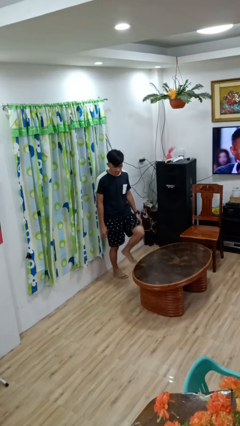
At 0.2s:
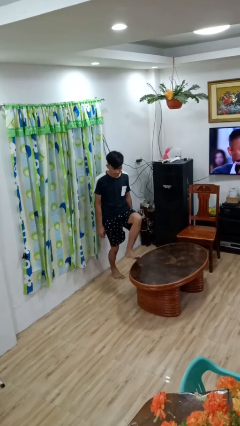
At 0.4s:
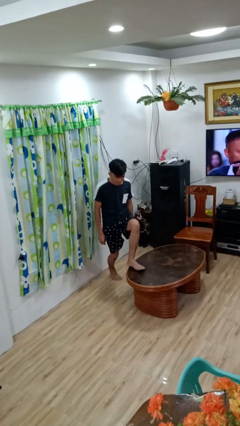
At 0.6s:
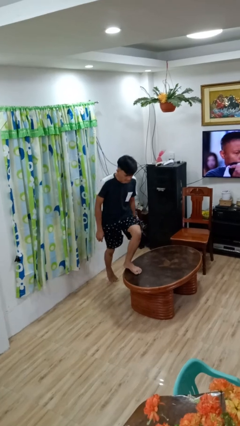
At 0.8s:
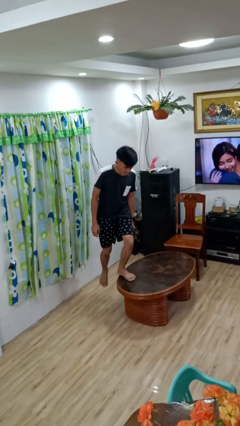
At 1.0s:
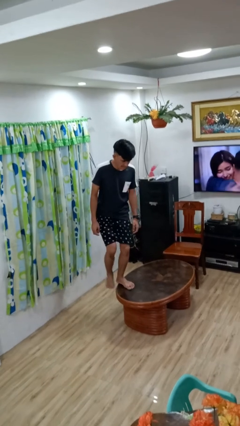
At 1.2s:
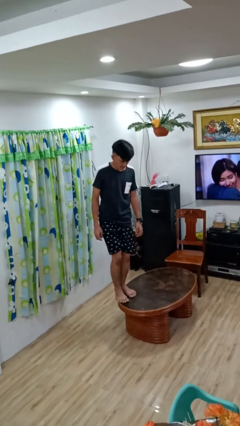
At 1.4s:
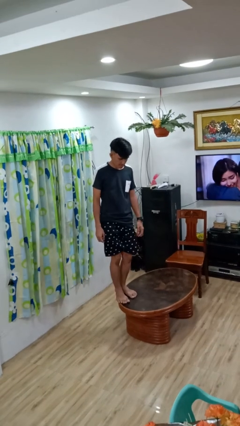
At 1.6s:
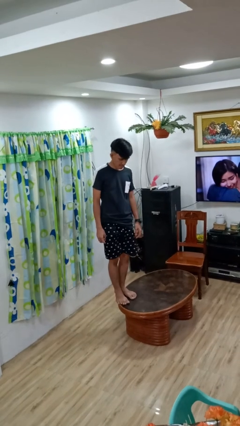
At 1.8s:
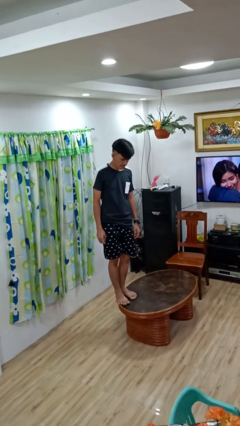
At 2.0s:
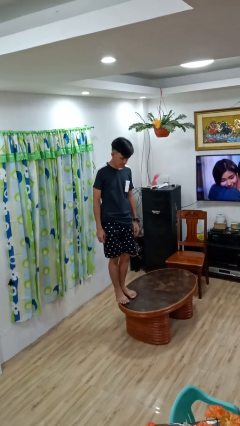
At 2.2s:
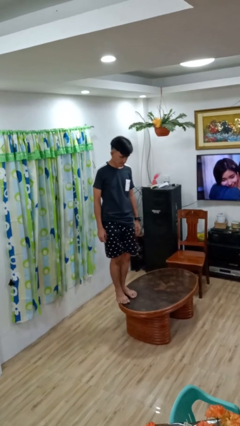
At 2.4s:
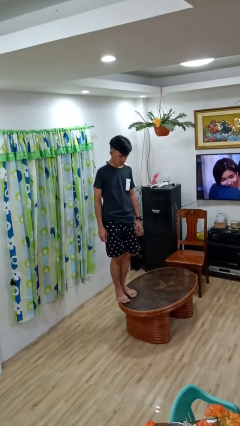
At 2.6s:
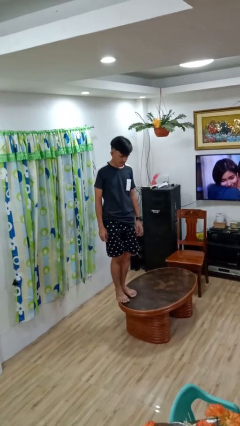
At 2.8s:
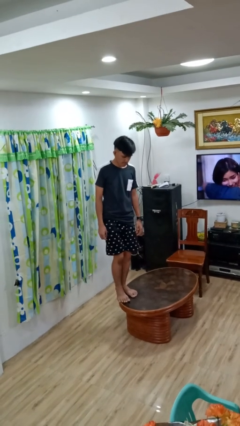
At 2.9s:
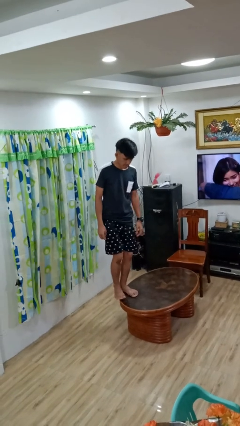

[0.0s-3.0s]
person climbs on table

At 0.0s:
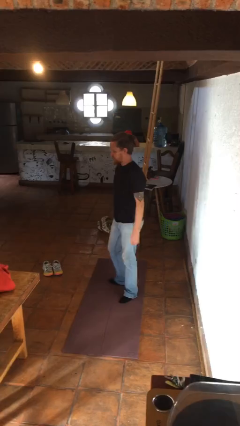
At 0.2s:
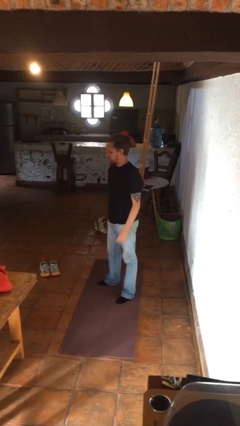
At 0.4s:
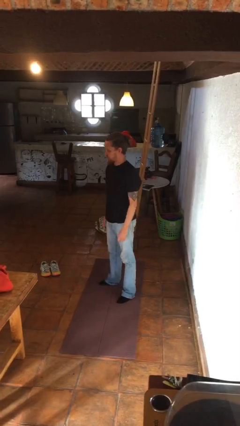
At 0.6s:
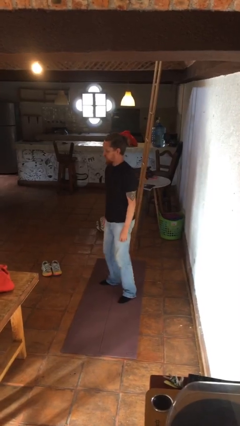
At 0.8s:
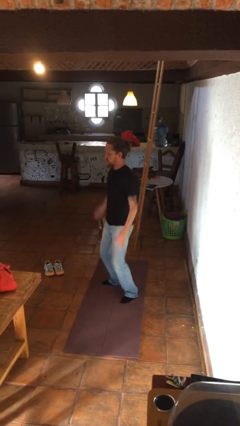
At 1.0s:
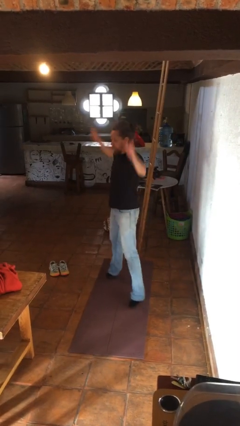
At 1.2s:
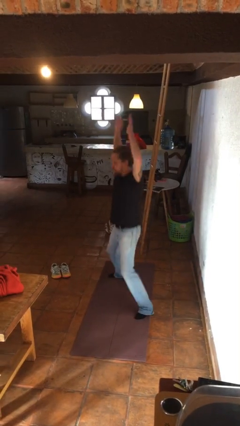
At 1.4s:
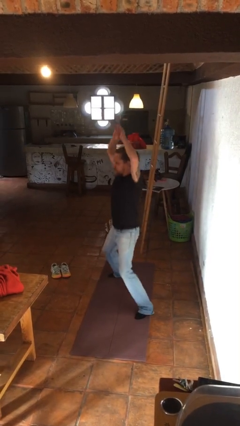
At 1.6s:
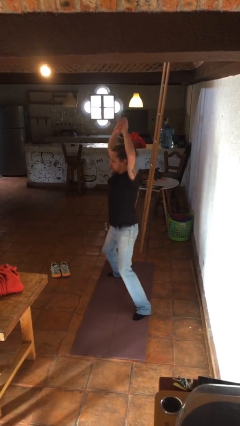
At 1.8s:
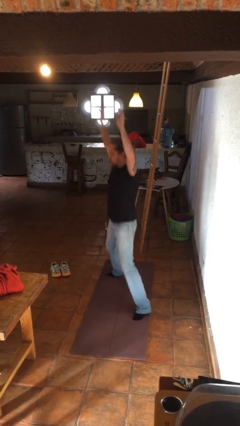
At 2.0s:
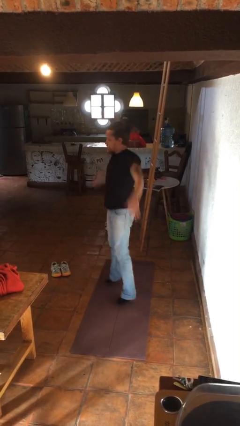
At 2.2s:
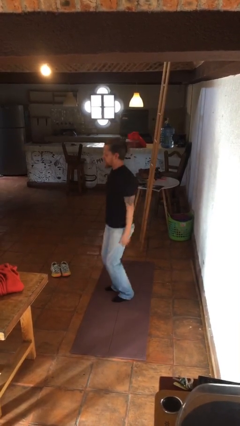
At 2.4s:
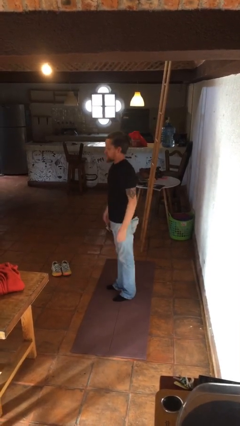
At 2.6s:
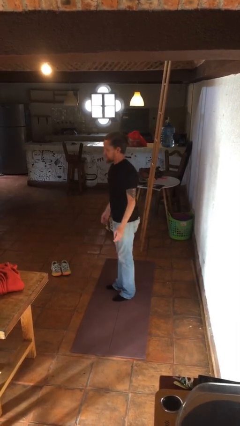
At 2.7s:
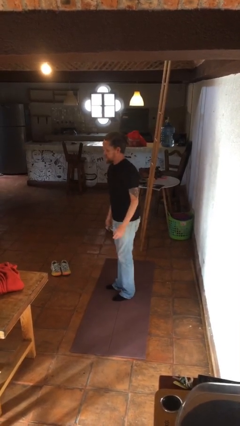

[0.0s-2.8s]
person exercises with jumping jacks

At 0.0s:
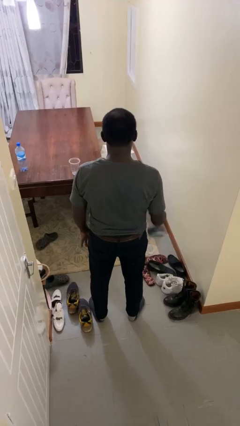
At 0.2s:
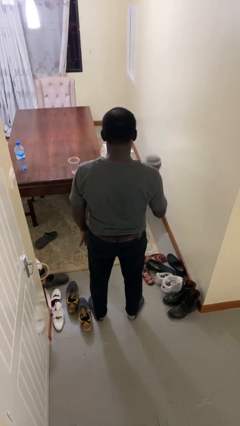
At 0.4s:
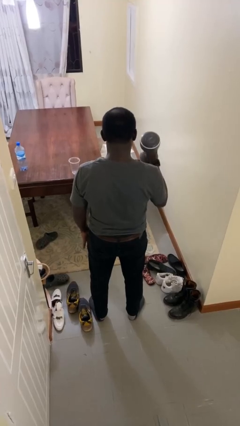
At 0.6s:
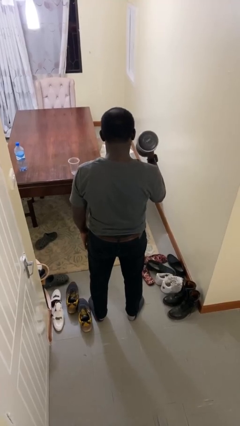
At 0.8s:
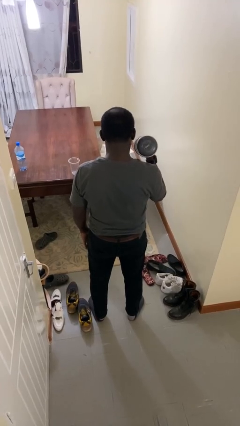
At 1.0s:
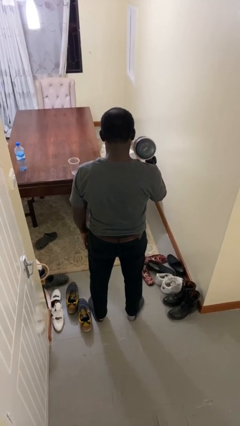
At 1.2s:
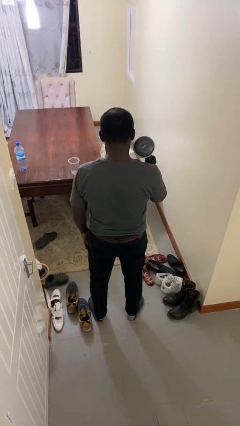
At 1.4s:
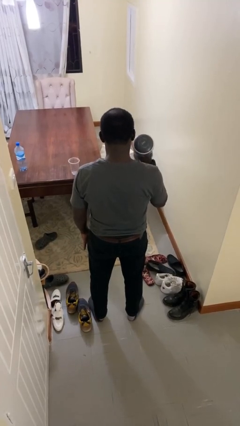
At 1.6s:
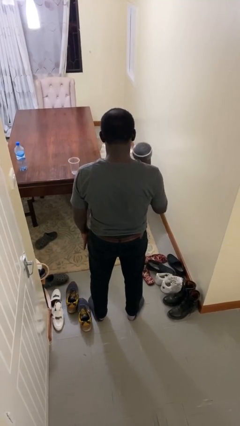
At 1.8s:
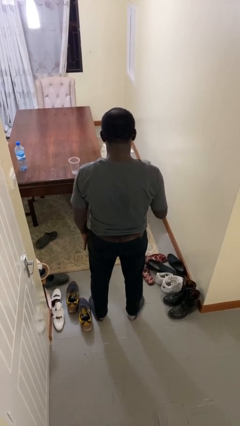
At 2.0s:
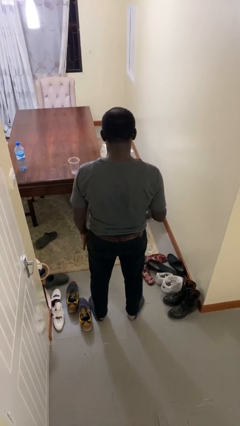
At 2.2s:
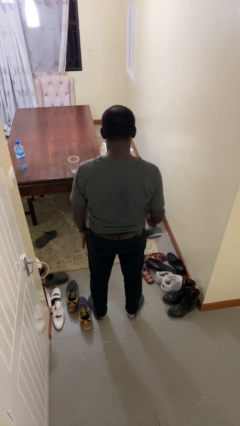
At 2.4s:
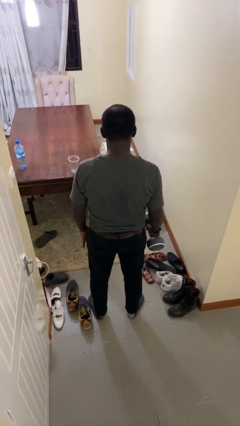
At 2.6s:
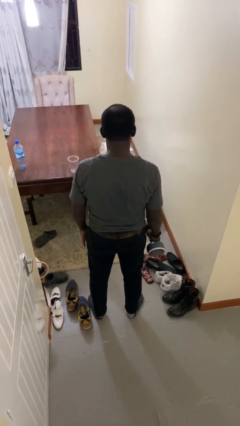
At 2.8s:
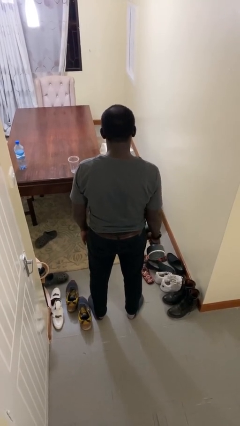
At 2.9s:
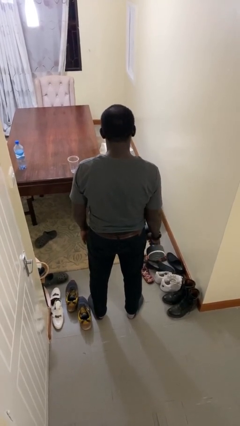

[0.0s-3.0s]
person lifts dumbbells

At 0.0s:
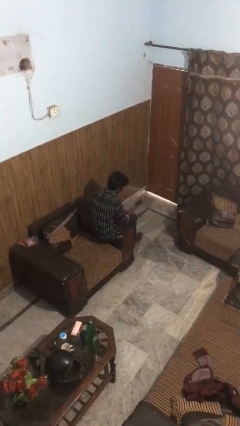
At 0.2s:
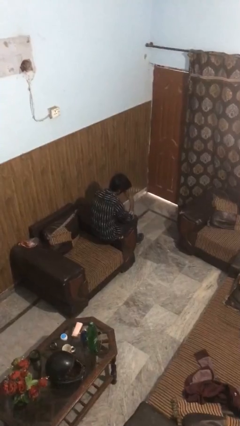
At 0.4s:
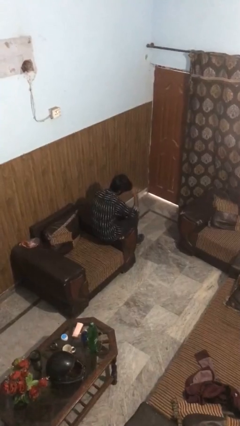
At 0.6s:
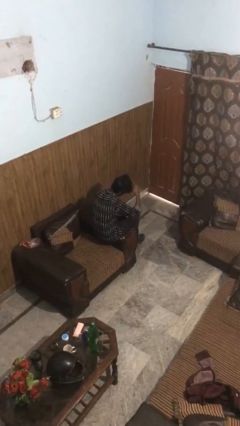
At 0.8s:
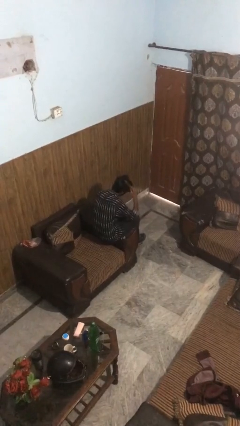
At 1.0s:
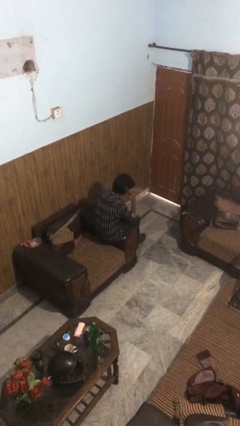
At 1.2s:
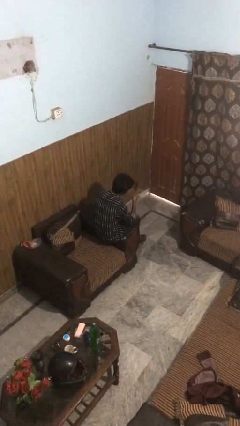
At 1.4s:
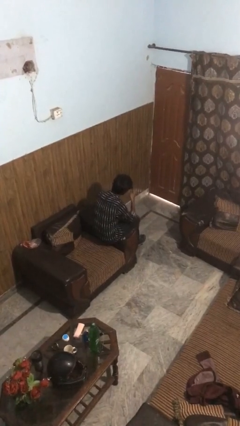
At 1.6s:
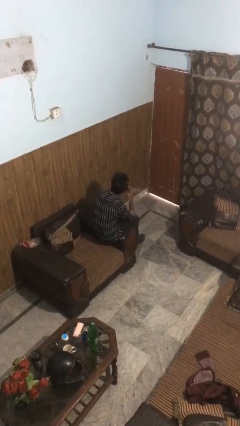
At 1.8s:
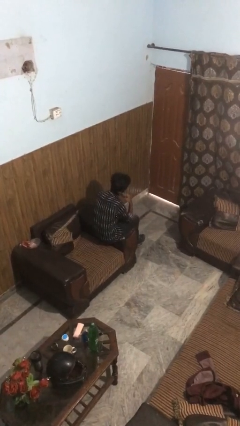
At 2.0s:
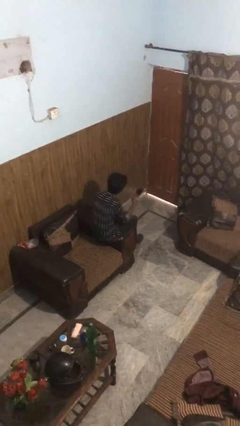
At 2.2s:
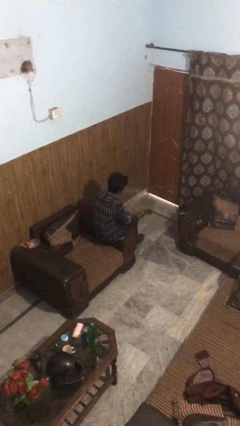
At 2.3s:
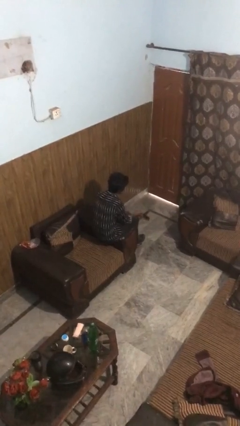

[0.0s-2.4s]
person brushes hair

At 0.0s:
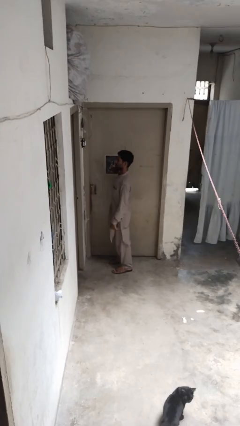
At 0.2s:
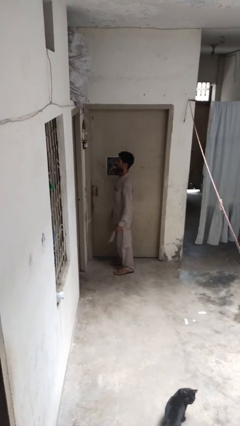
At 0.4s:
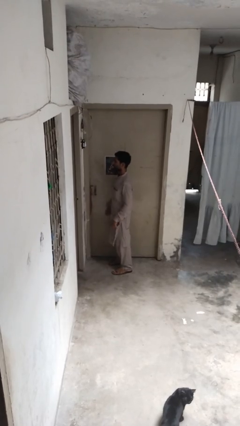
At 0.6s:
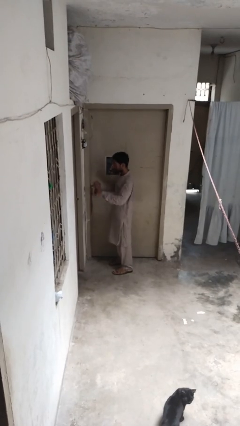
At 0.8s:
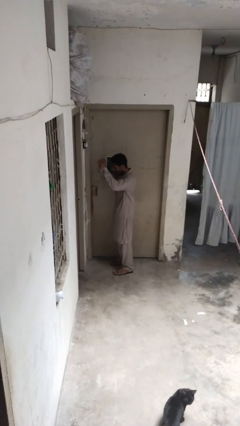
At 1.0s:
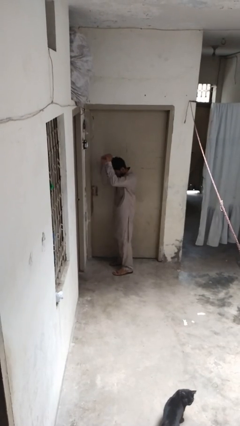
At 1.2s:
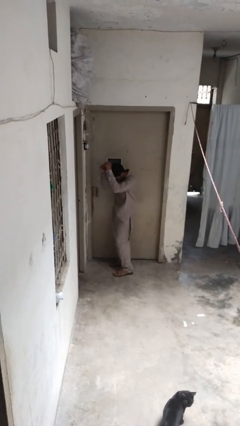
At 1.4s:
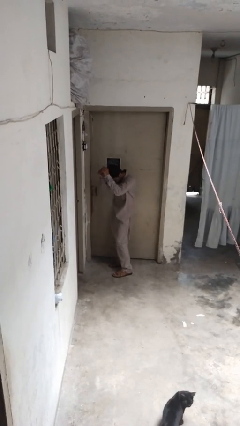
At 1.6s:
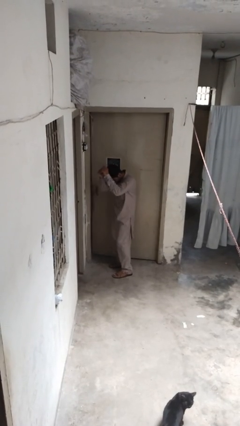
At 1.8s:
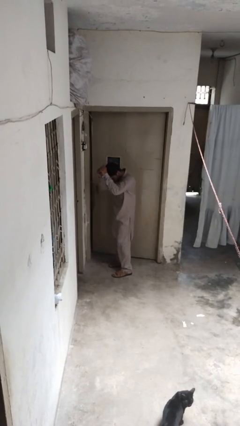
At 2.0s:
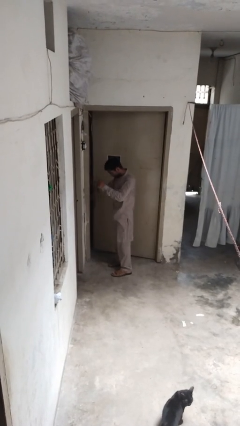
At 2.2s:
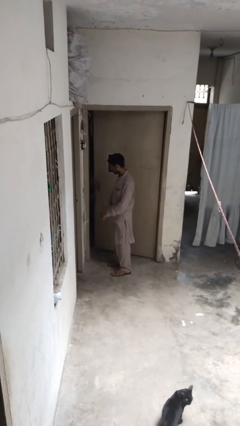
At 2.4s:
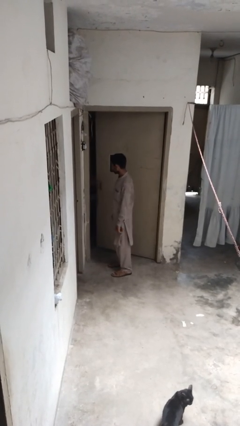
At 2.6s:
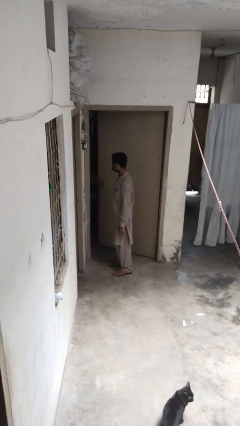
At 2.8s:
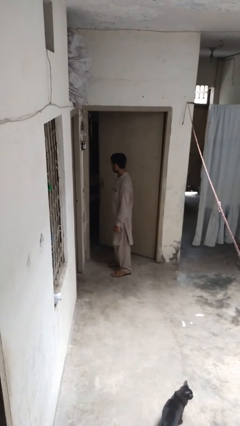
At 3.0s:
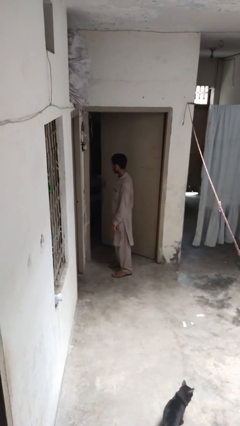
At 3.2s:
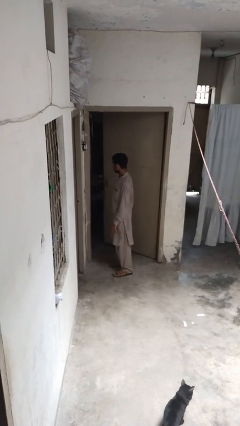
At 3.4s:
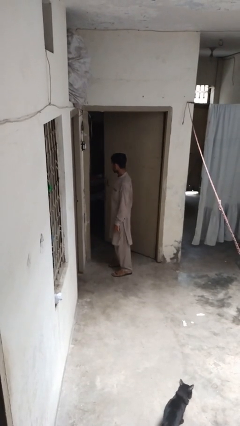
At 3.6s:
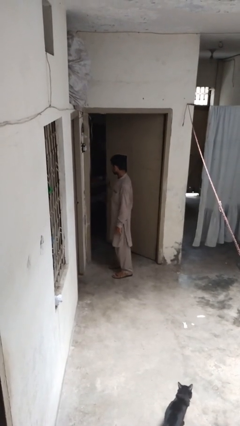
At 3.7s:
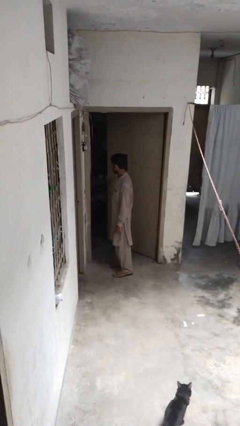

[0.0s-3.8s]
person opens facility door

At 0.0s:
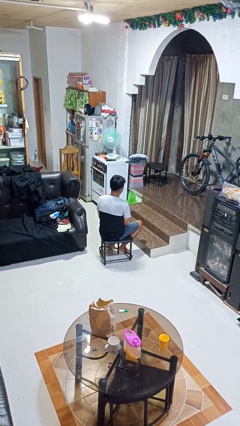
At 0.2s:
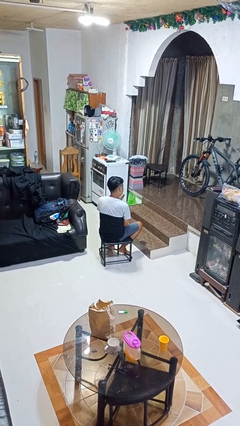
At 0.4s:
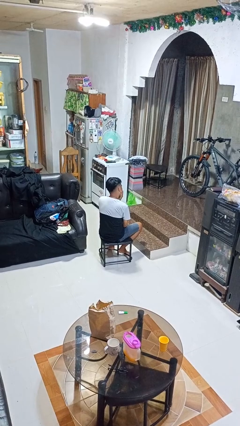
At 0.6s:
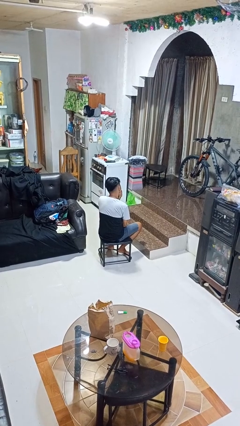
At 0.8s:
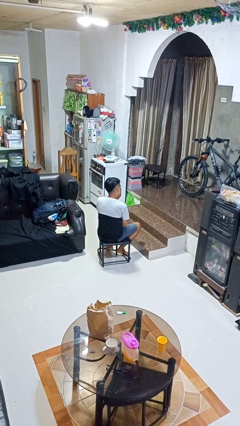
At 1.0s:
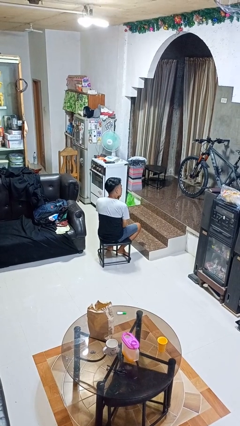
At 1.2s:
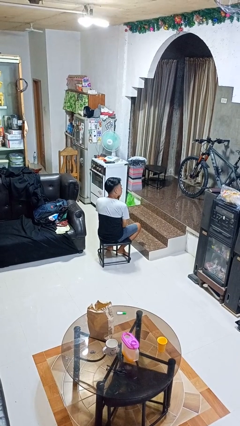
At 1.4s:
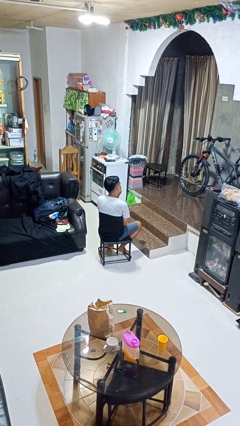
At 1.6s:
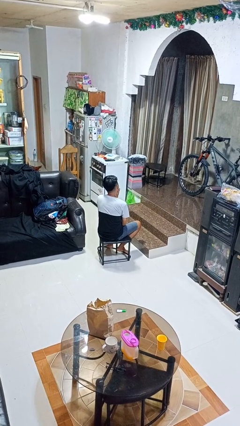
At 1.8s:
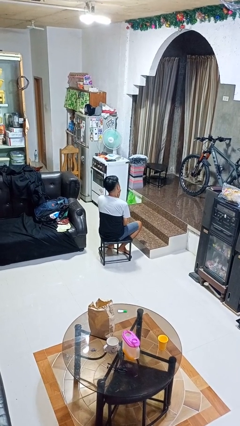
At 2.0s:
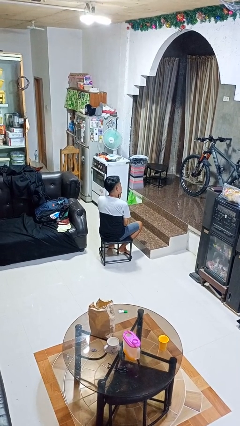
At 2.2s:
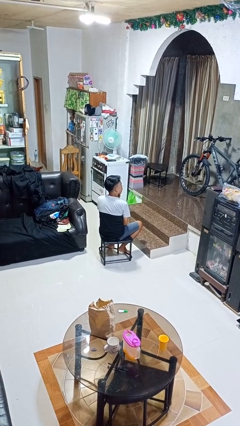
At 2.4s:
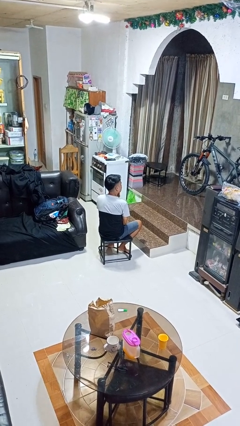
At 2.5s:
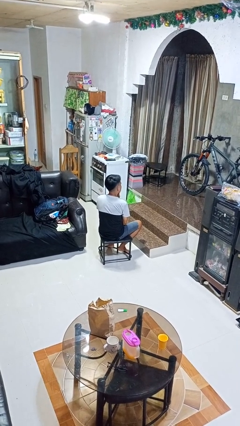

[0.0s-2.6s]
person strokes chin
